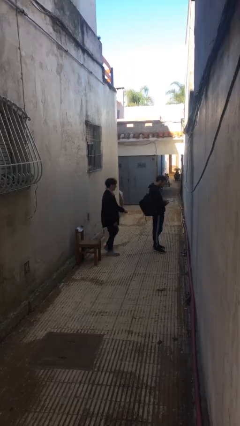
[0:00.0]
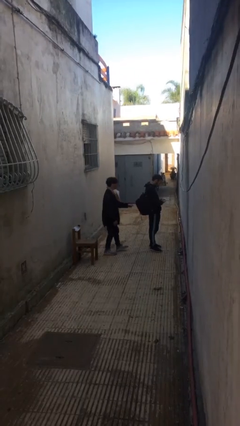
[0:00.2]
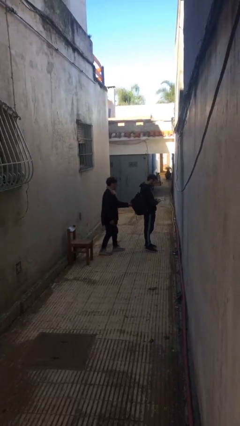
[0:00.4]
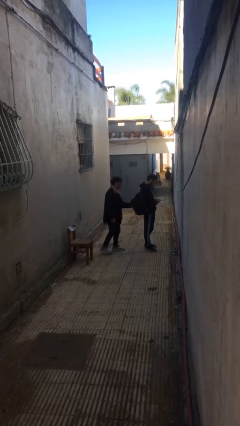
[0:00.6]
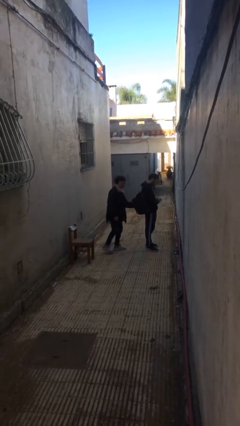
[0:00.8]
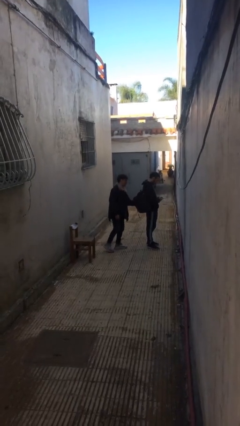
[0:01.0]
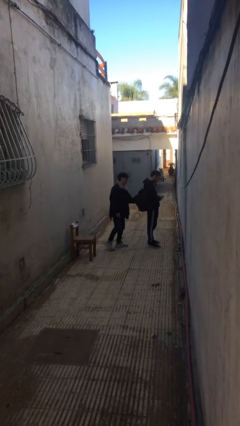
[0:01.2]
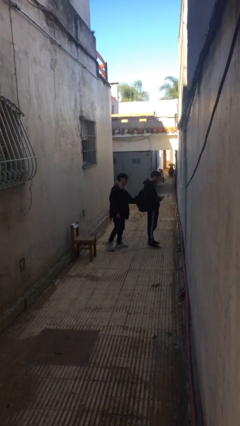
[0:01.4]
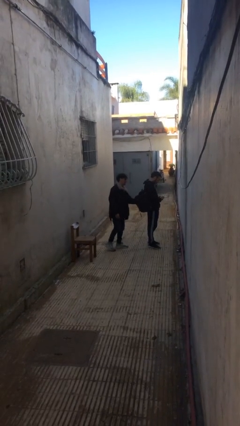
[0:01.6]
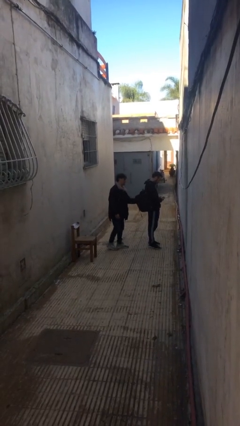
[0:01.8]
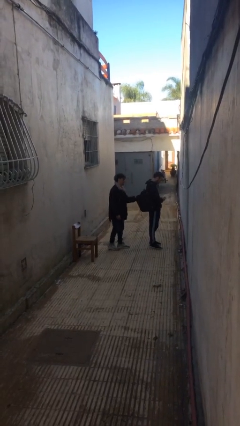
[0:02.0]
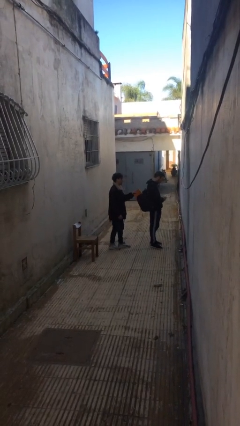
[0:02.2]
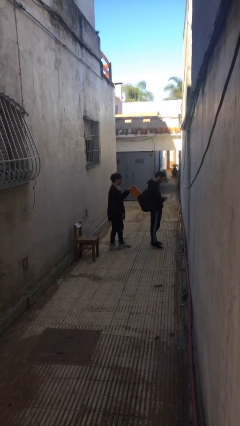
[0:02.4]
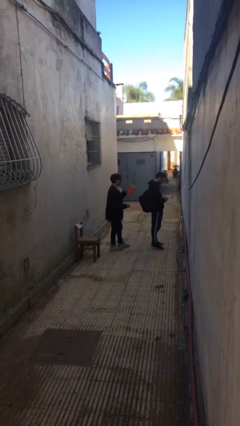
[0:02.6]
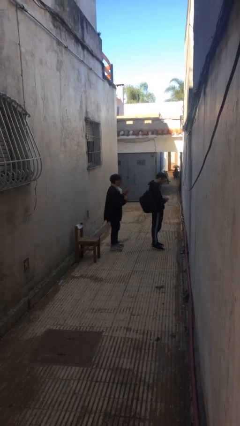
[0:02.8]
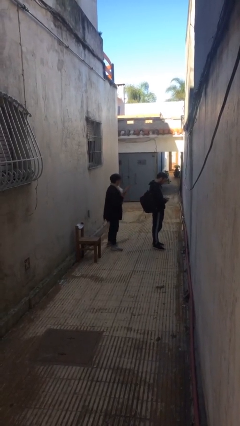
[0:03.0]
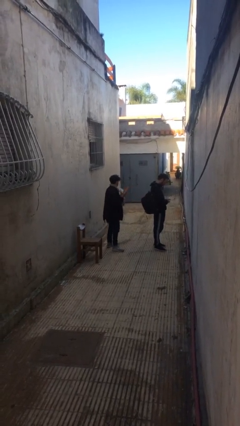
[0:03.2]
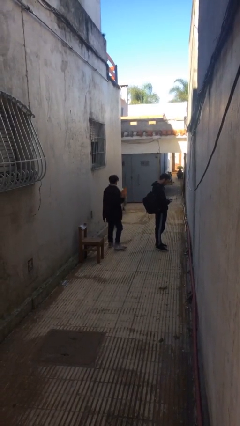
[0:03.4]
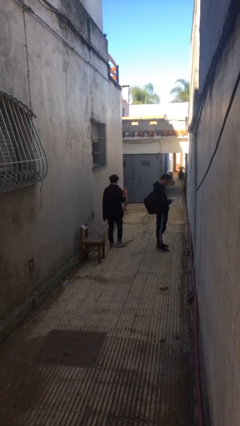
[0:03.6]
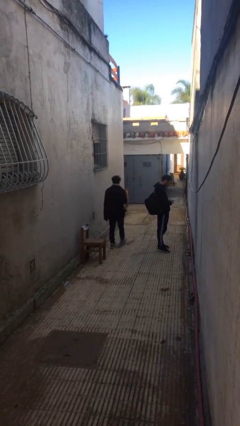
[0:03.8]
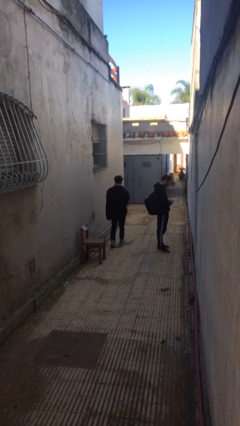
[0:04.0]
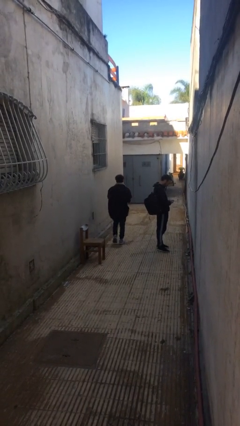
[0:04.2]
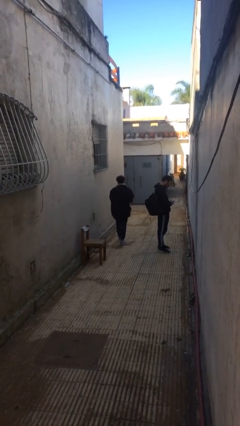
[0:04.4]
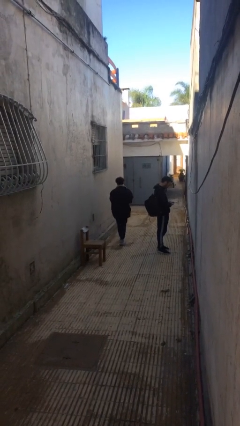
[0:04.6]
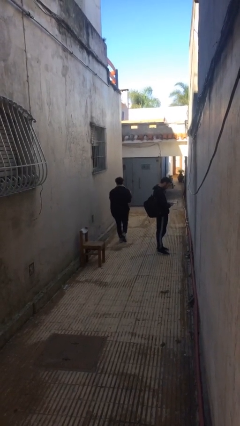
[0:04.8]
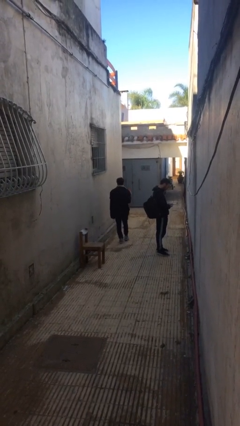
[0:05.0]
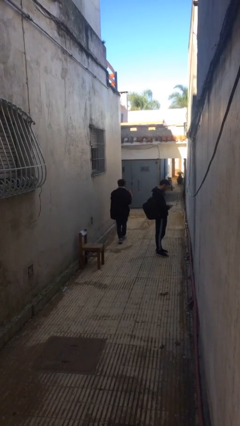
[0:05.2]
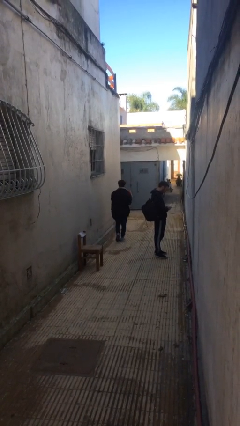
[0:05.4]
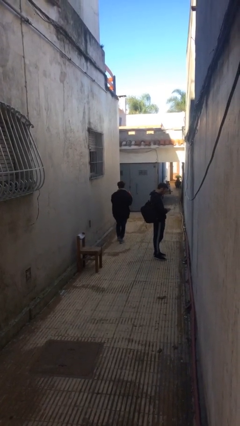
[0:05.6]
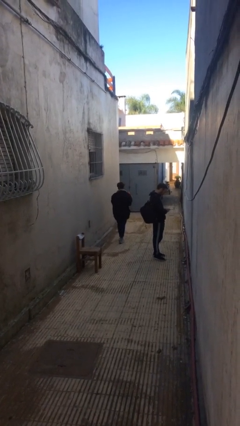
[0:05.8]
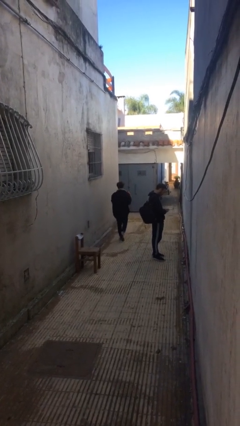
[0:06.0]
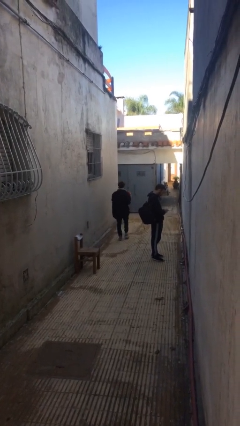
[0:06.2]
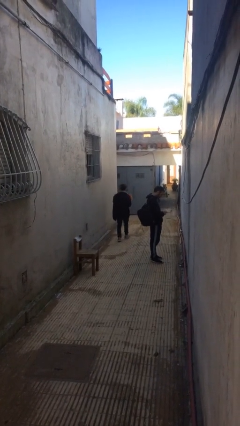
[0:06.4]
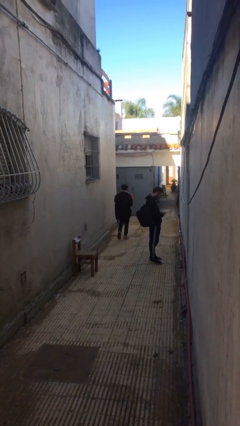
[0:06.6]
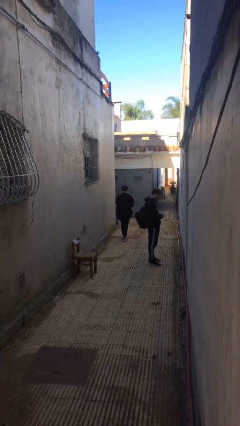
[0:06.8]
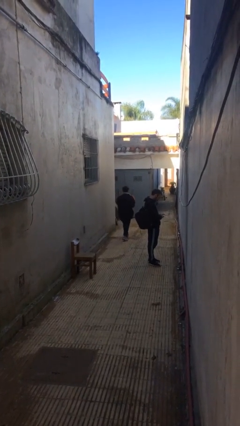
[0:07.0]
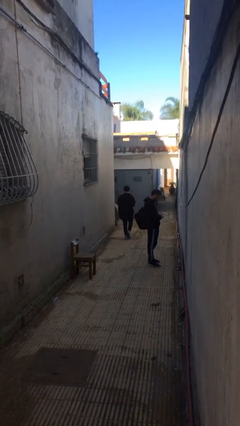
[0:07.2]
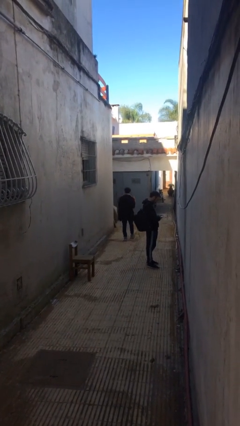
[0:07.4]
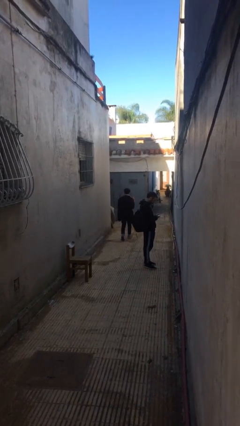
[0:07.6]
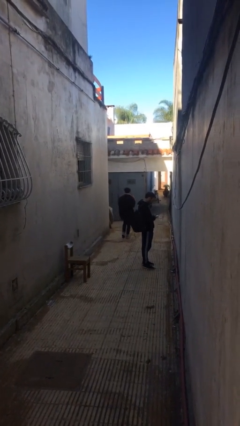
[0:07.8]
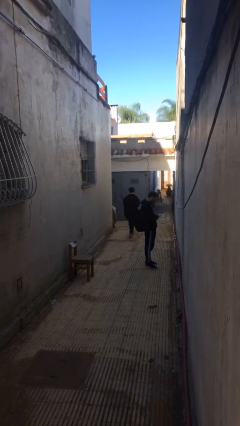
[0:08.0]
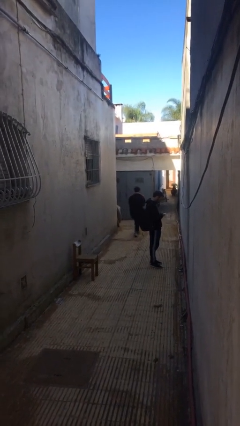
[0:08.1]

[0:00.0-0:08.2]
person steals object from person

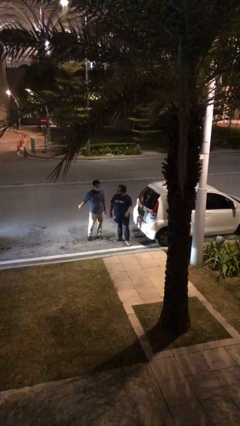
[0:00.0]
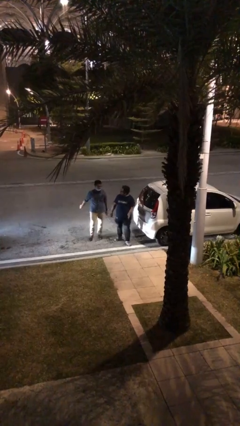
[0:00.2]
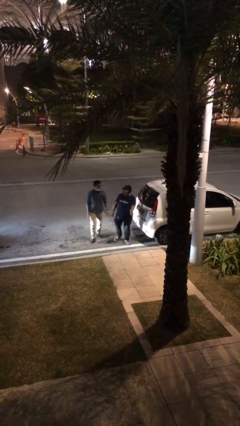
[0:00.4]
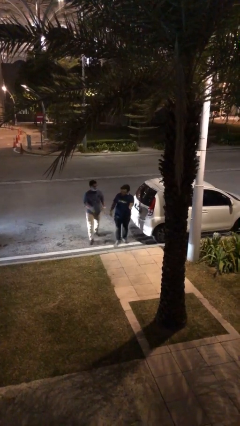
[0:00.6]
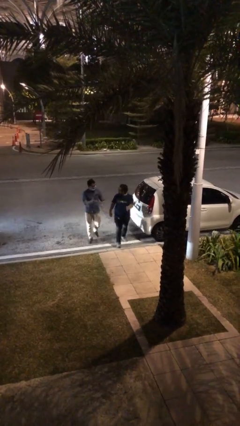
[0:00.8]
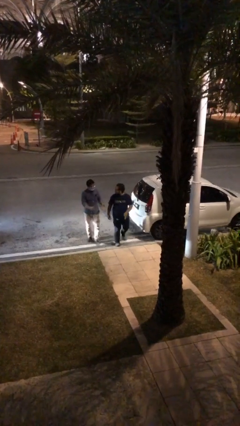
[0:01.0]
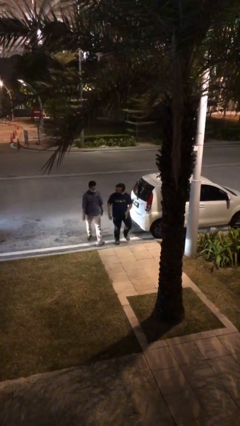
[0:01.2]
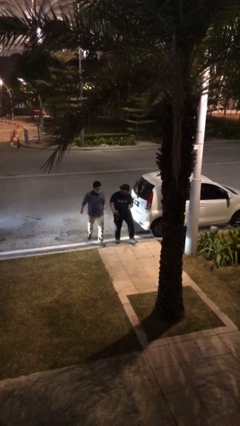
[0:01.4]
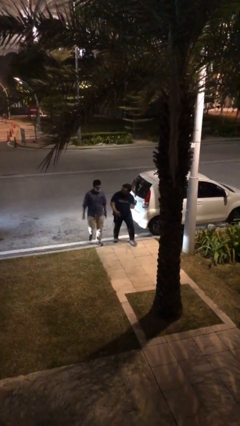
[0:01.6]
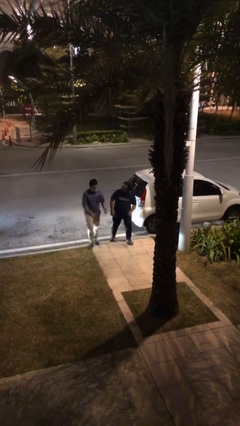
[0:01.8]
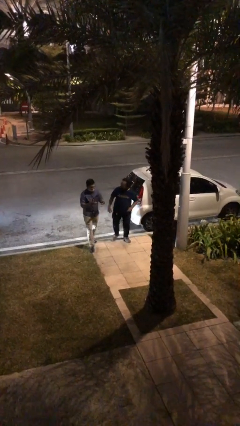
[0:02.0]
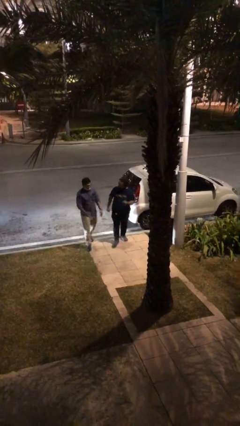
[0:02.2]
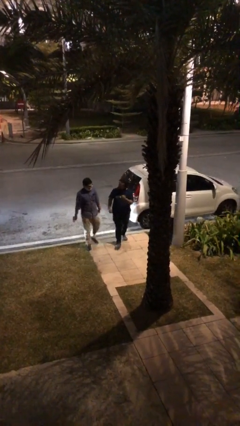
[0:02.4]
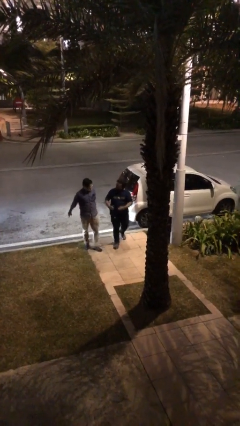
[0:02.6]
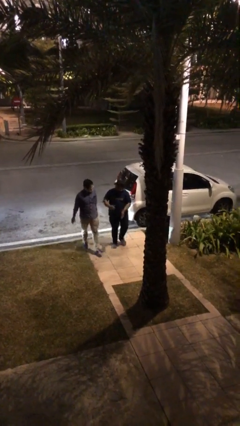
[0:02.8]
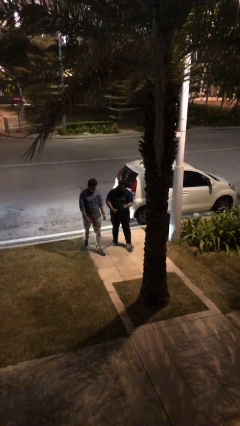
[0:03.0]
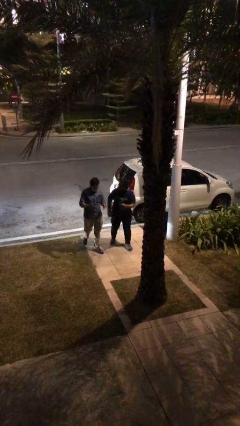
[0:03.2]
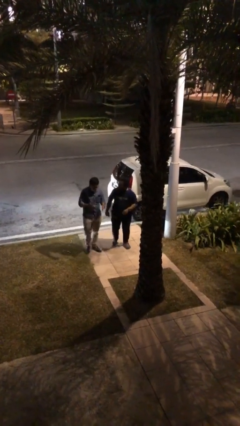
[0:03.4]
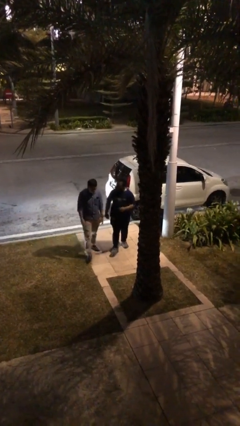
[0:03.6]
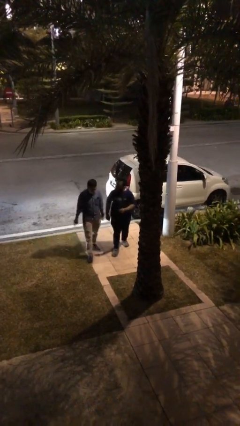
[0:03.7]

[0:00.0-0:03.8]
person talks to person

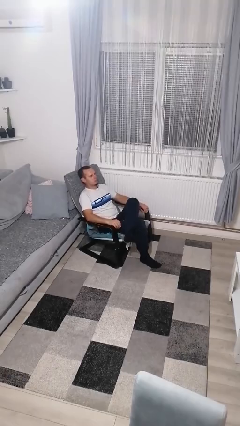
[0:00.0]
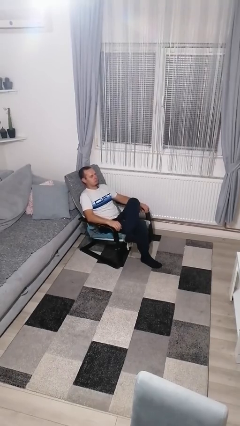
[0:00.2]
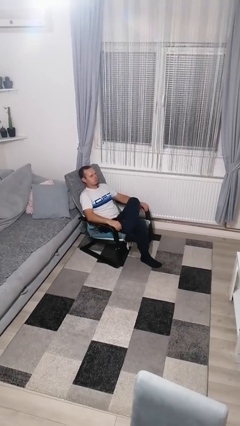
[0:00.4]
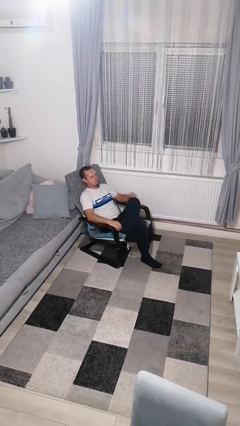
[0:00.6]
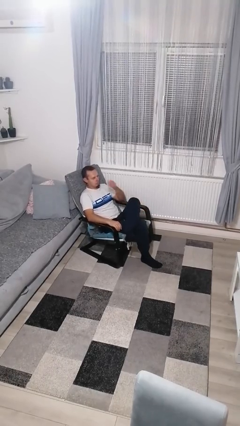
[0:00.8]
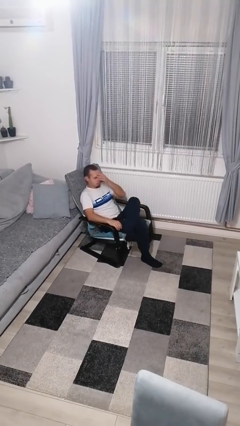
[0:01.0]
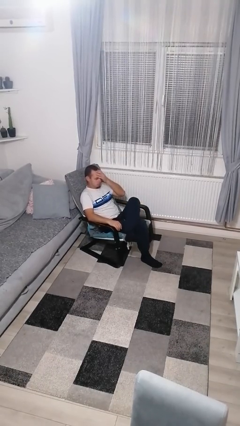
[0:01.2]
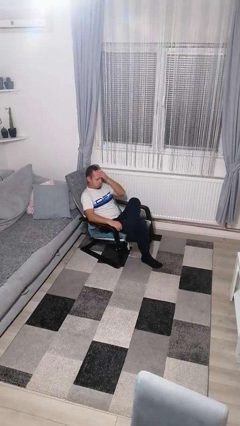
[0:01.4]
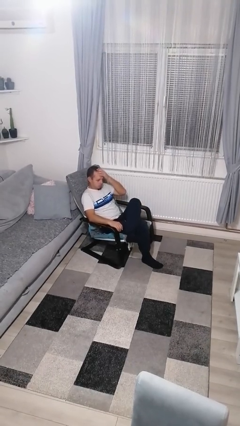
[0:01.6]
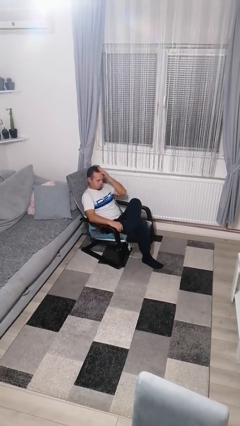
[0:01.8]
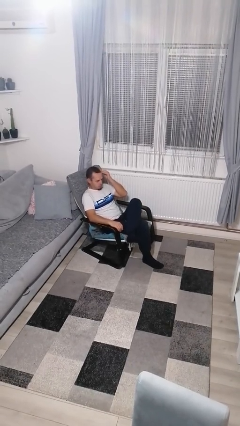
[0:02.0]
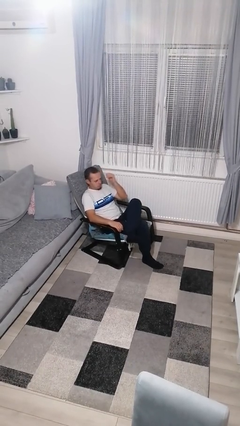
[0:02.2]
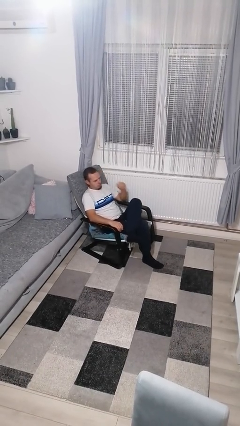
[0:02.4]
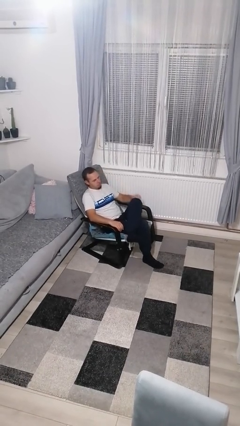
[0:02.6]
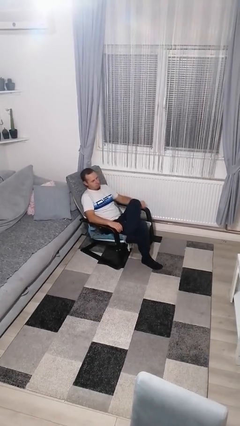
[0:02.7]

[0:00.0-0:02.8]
person strokes hair

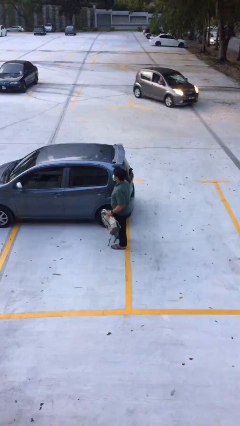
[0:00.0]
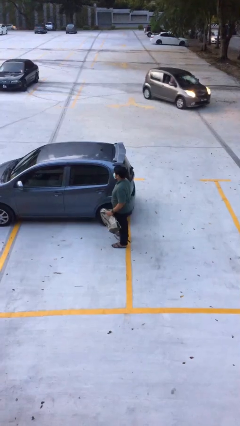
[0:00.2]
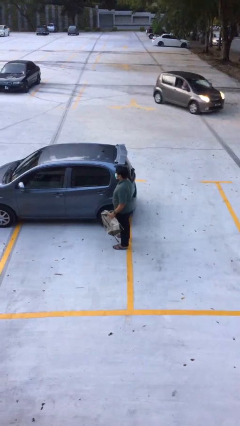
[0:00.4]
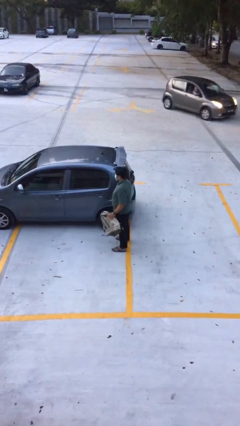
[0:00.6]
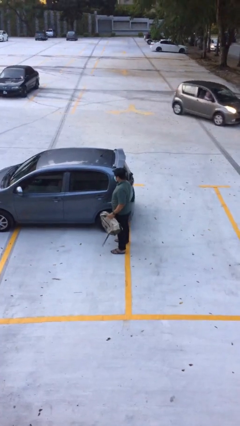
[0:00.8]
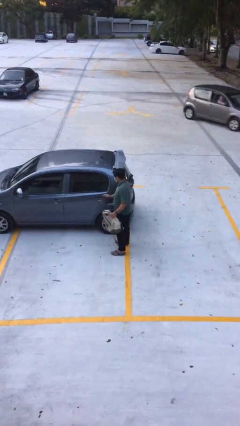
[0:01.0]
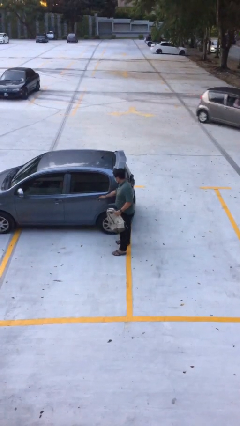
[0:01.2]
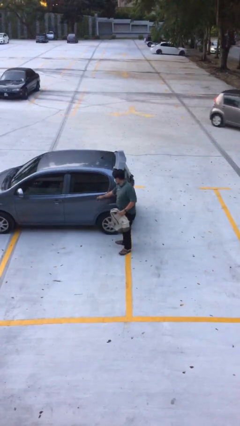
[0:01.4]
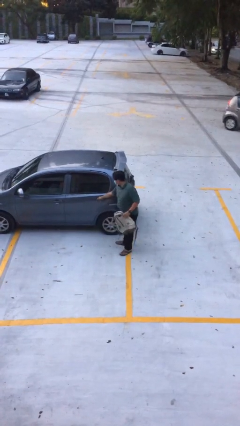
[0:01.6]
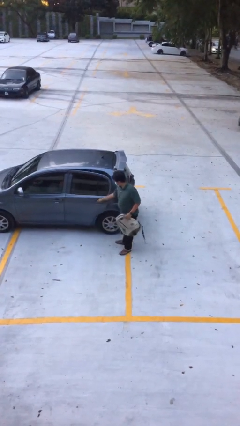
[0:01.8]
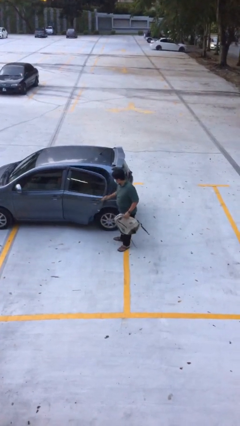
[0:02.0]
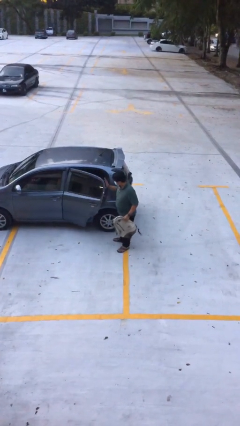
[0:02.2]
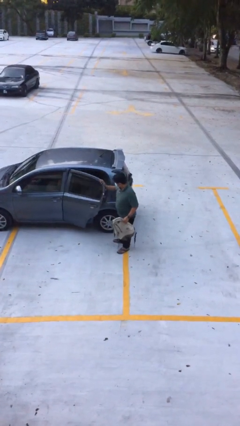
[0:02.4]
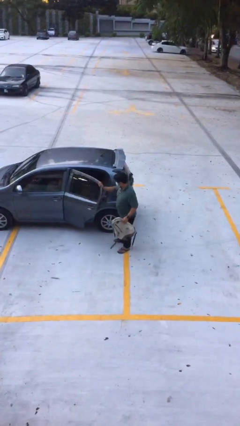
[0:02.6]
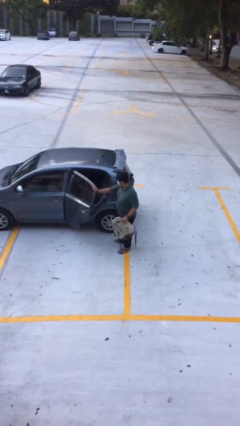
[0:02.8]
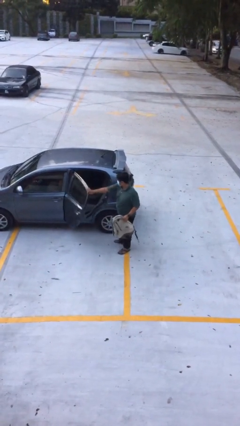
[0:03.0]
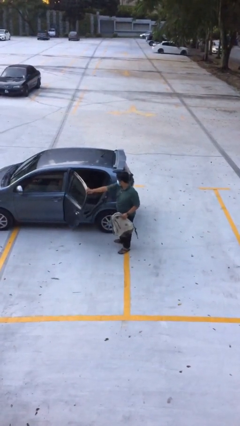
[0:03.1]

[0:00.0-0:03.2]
person opens car door
